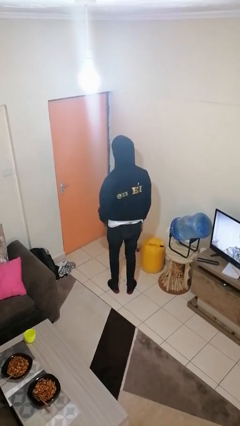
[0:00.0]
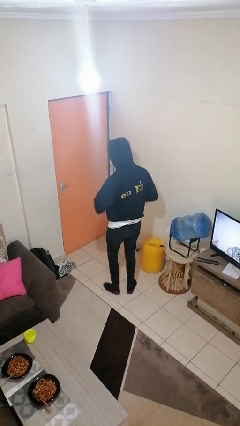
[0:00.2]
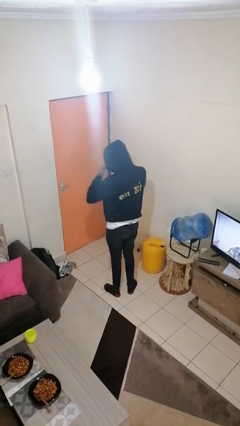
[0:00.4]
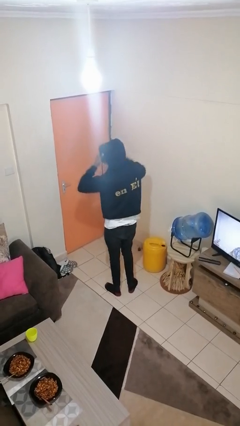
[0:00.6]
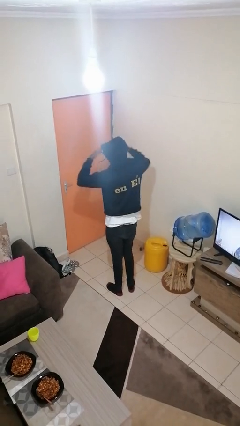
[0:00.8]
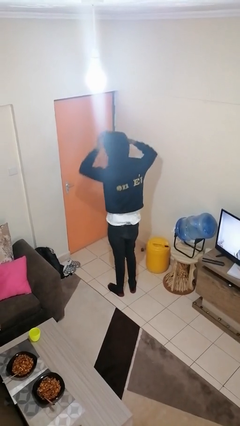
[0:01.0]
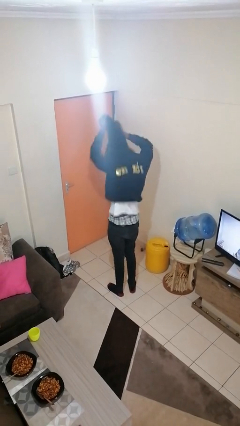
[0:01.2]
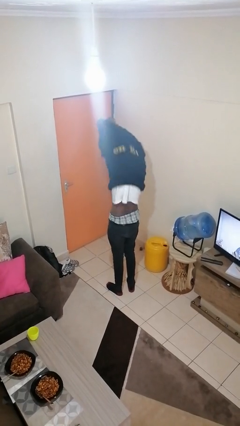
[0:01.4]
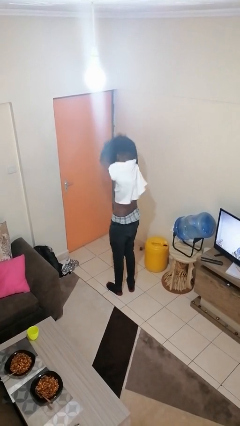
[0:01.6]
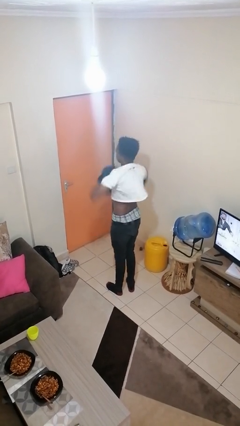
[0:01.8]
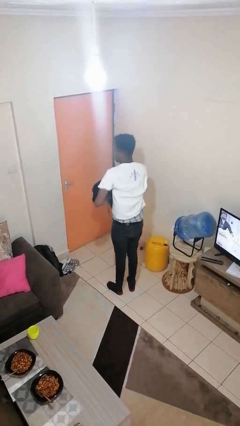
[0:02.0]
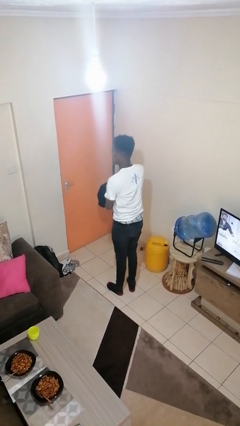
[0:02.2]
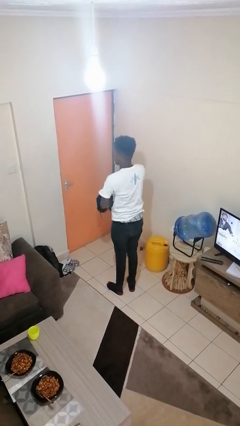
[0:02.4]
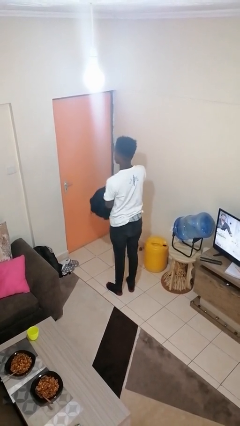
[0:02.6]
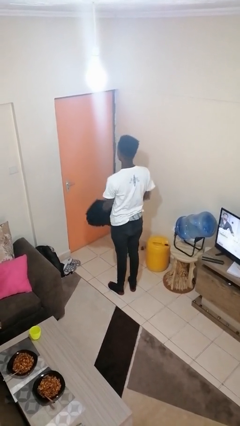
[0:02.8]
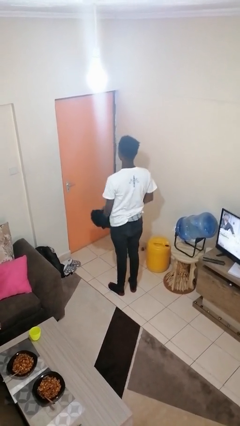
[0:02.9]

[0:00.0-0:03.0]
person takes off hoodie

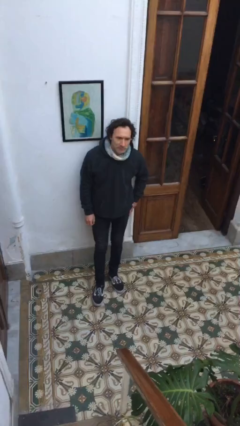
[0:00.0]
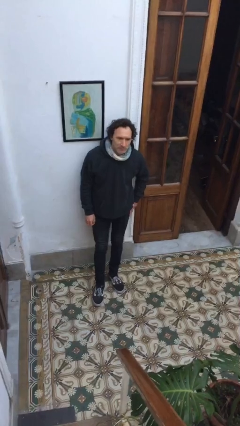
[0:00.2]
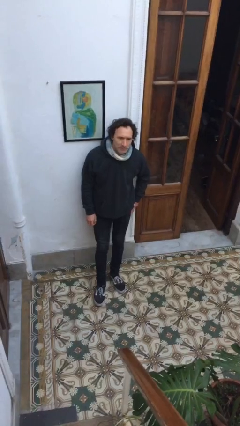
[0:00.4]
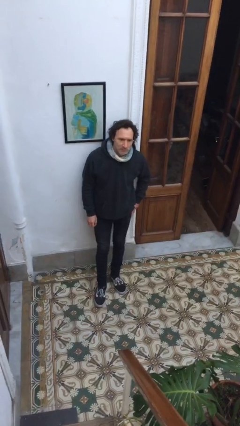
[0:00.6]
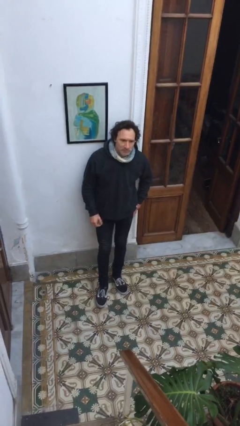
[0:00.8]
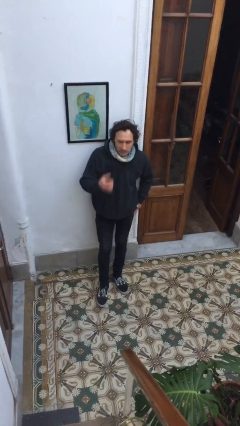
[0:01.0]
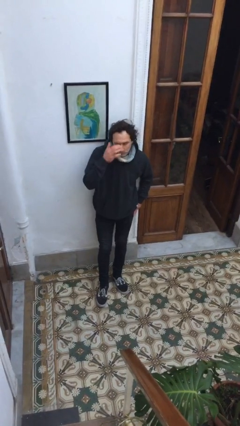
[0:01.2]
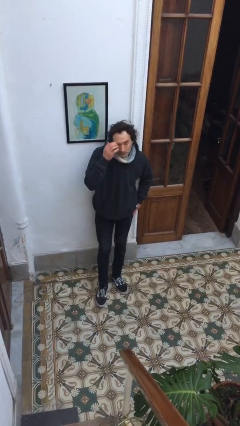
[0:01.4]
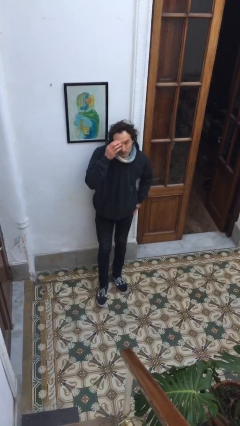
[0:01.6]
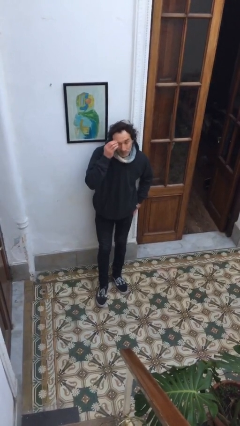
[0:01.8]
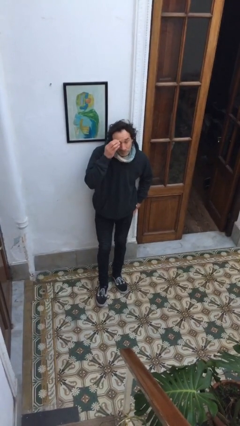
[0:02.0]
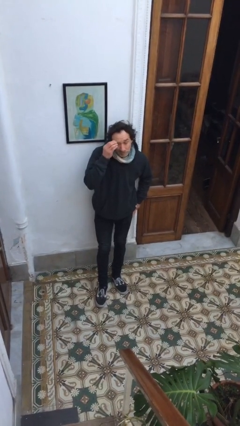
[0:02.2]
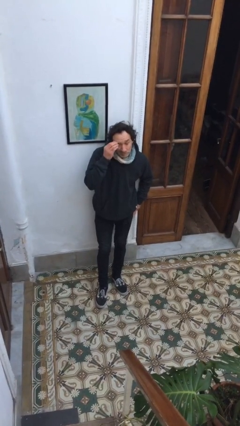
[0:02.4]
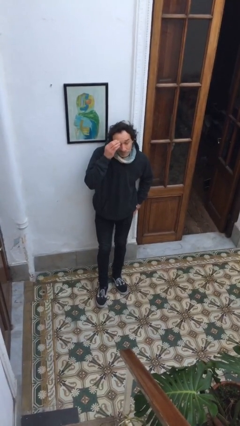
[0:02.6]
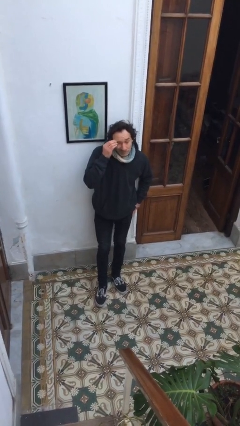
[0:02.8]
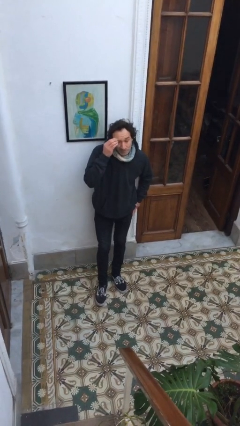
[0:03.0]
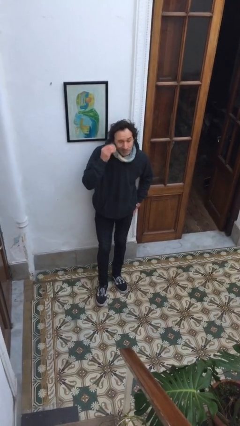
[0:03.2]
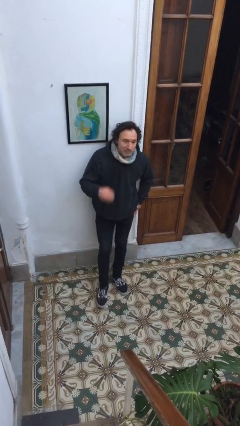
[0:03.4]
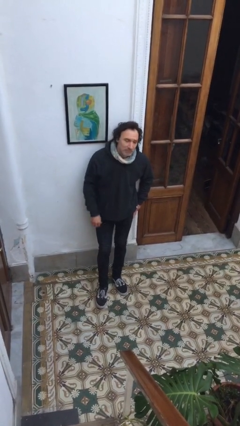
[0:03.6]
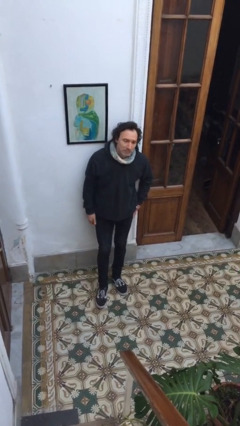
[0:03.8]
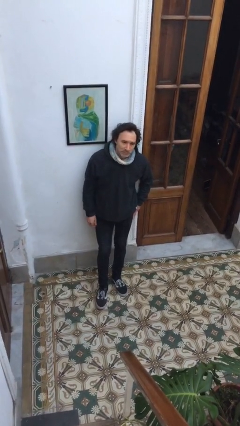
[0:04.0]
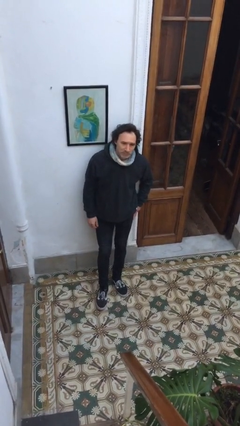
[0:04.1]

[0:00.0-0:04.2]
person scratches face

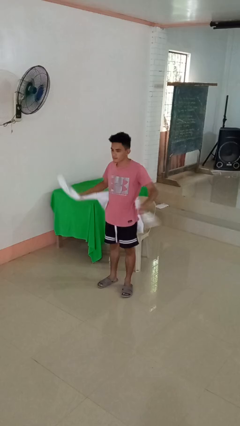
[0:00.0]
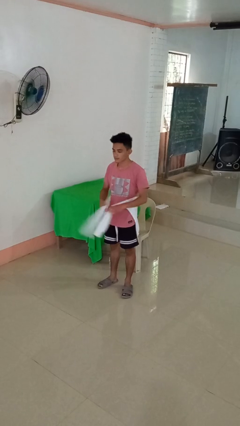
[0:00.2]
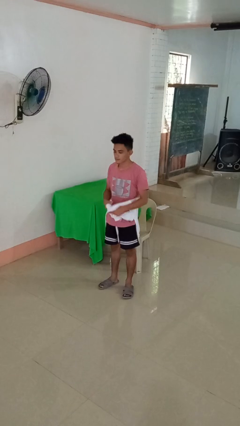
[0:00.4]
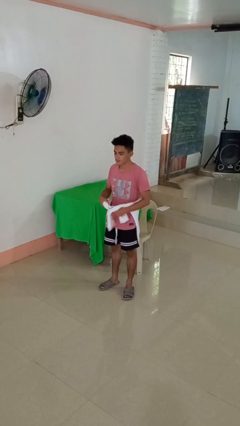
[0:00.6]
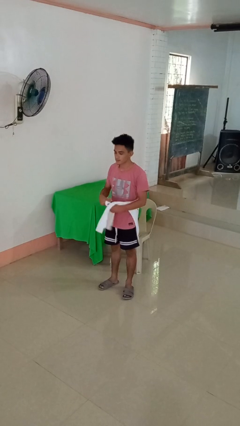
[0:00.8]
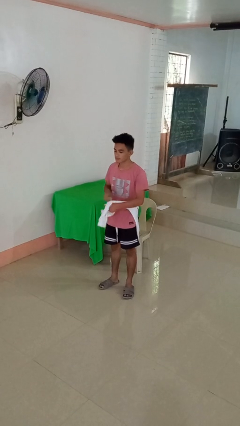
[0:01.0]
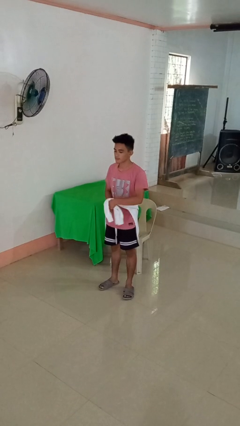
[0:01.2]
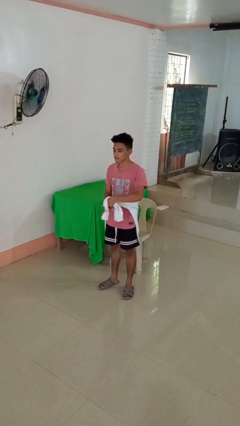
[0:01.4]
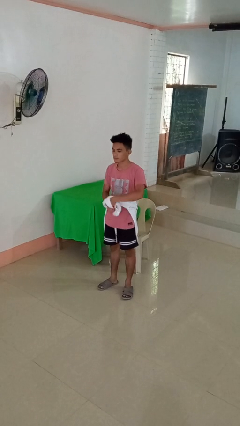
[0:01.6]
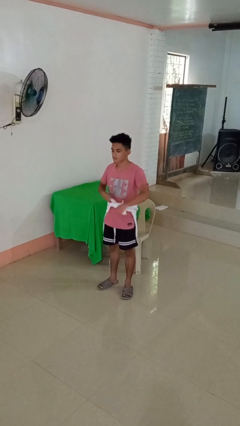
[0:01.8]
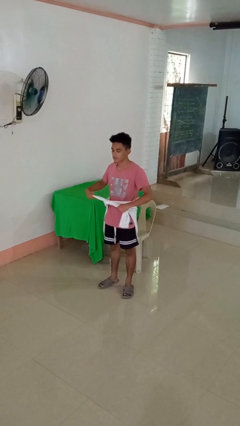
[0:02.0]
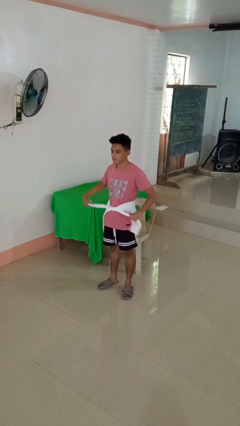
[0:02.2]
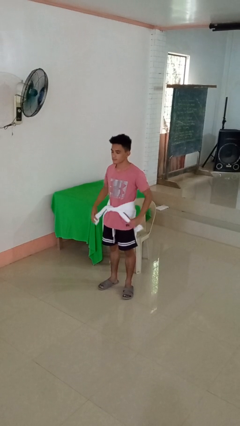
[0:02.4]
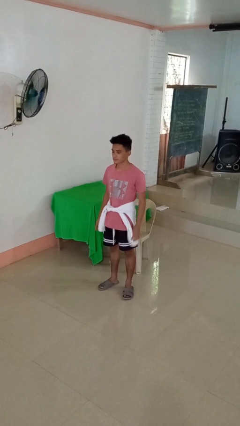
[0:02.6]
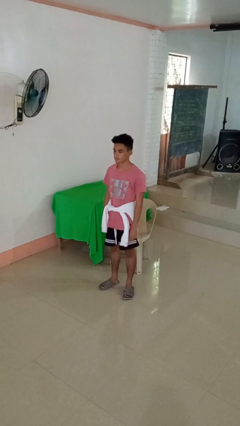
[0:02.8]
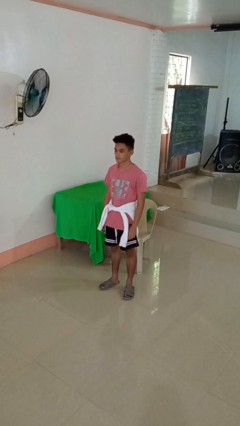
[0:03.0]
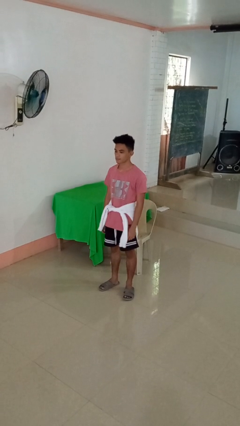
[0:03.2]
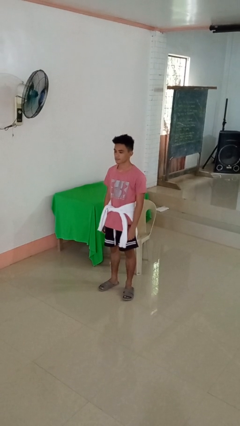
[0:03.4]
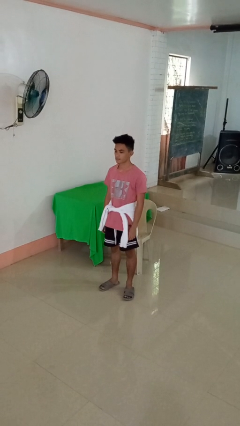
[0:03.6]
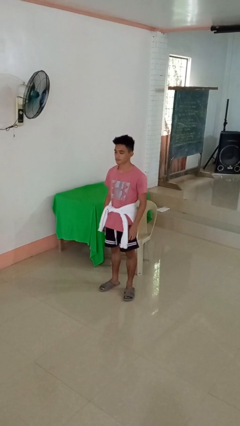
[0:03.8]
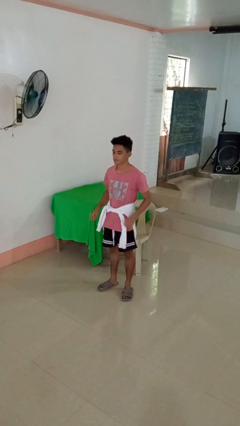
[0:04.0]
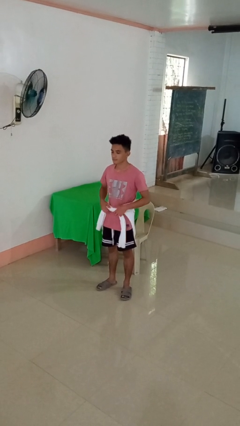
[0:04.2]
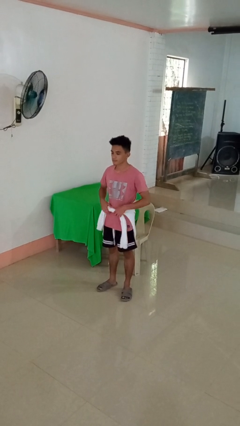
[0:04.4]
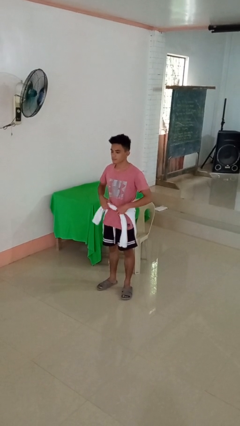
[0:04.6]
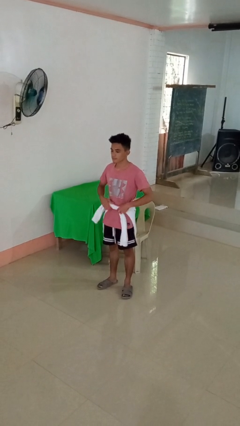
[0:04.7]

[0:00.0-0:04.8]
person ties jacket around waist

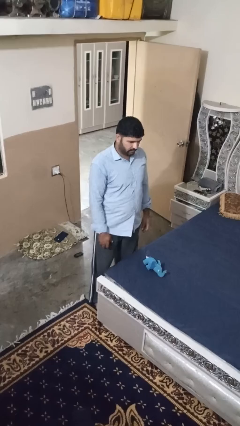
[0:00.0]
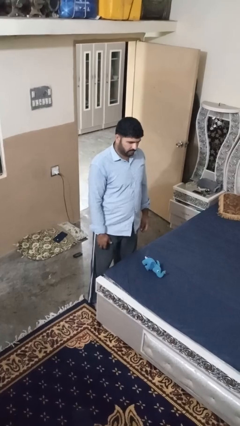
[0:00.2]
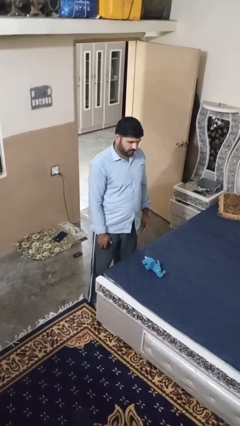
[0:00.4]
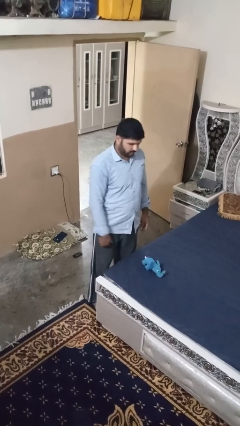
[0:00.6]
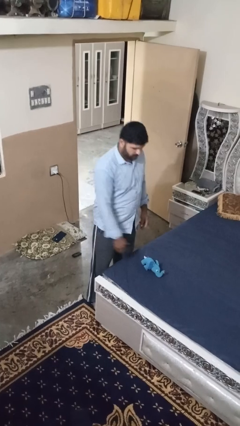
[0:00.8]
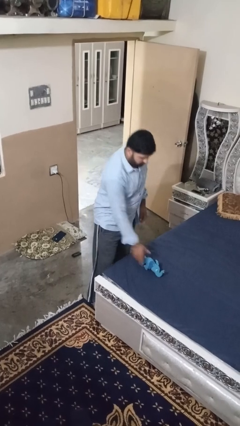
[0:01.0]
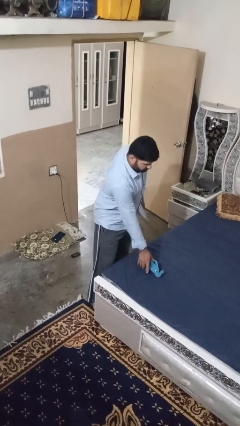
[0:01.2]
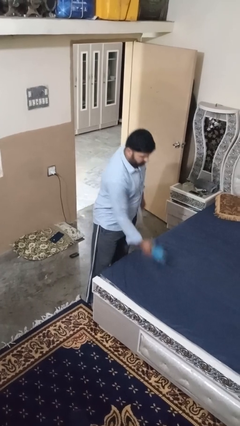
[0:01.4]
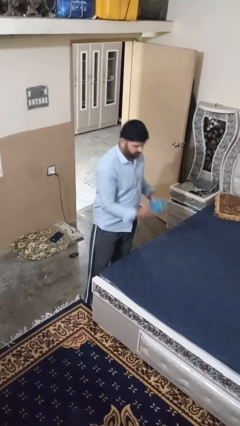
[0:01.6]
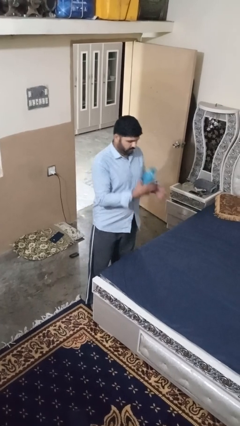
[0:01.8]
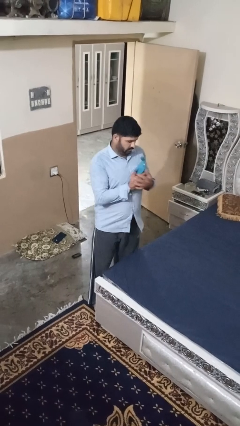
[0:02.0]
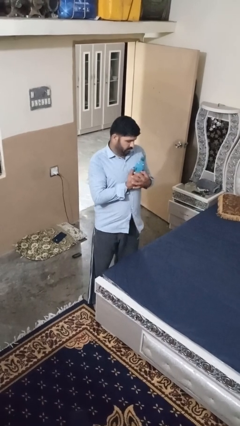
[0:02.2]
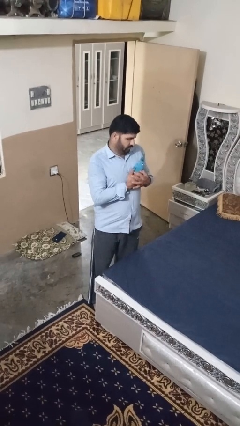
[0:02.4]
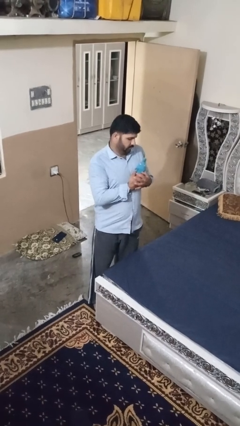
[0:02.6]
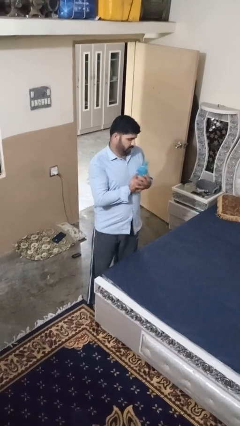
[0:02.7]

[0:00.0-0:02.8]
person hugs stuffed animal

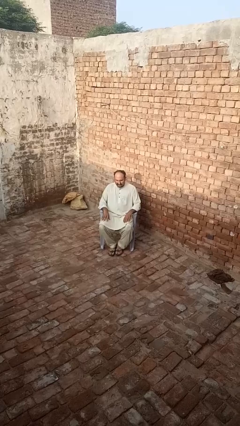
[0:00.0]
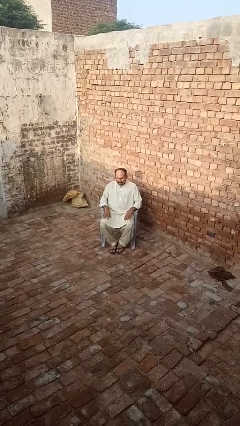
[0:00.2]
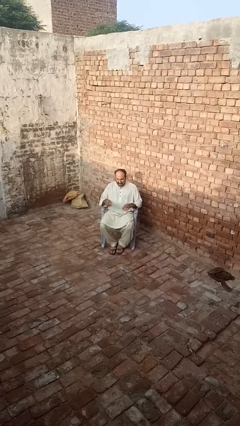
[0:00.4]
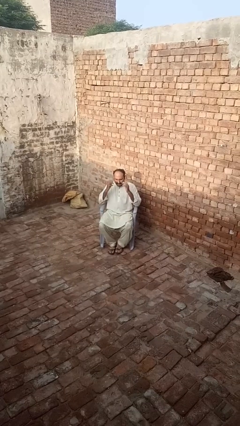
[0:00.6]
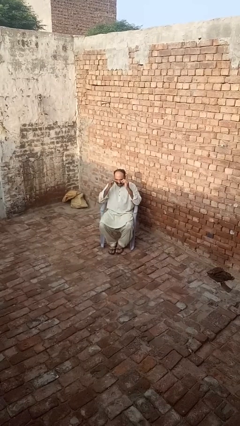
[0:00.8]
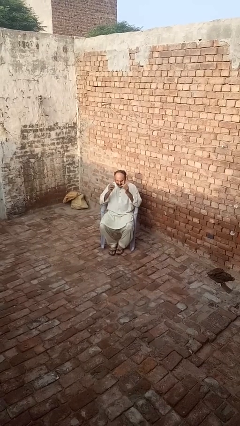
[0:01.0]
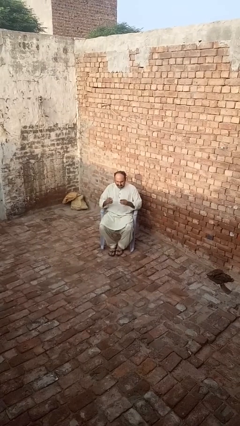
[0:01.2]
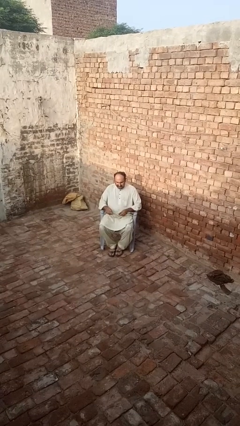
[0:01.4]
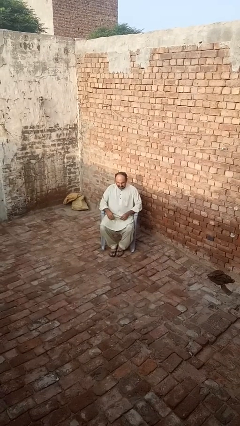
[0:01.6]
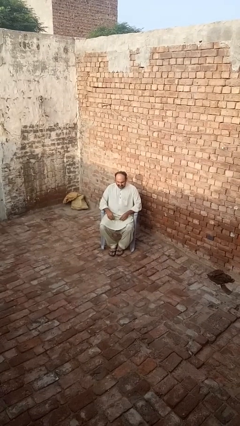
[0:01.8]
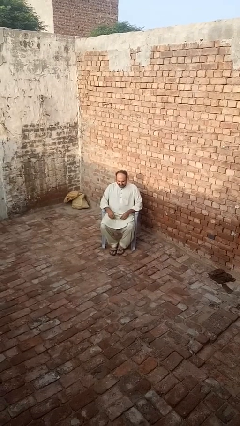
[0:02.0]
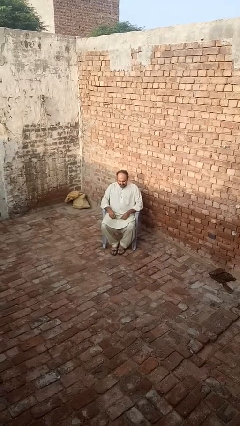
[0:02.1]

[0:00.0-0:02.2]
person takes off glasses

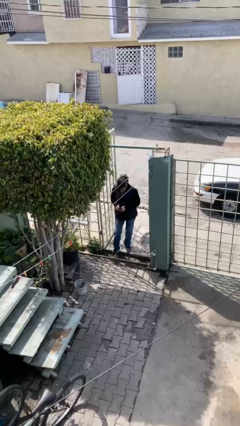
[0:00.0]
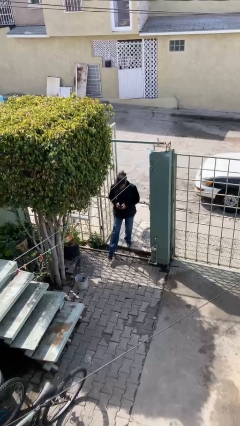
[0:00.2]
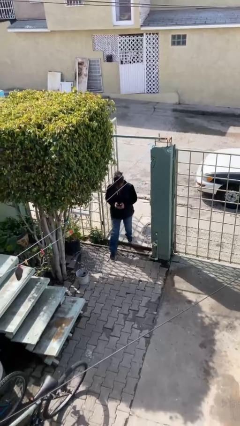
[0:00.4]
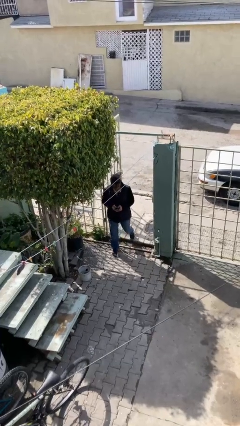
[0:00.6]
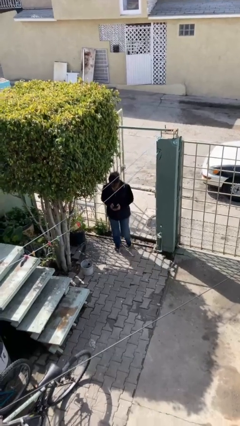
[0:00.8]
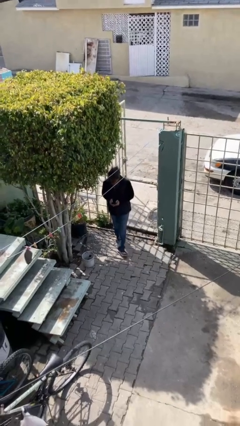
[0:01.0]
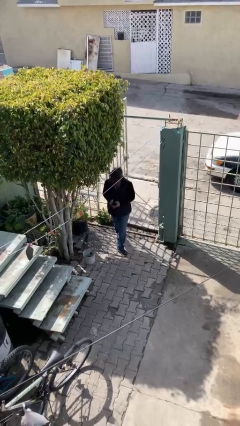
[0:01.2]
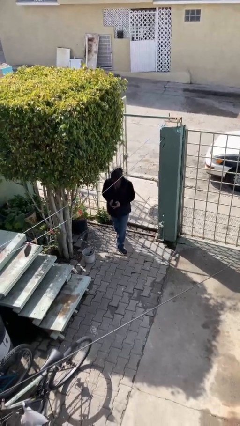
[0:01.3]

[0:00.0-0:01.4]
person enters scene through structure
